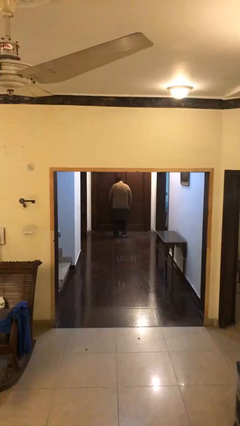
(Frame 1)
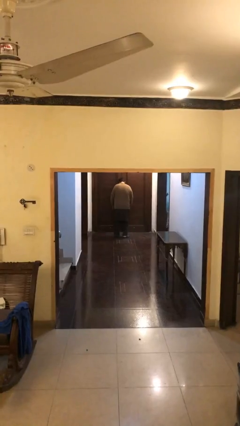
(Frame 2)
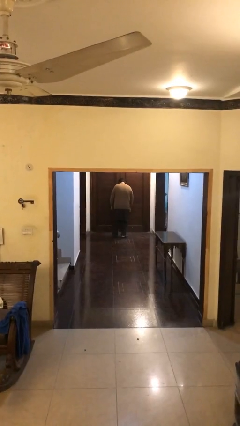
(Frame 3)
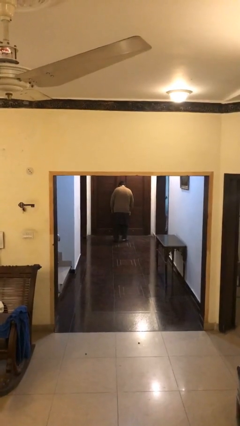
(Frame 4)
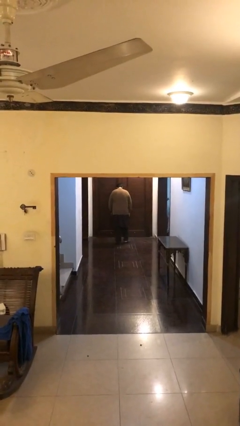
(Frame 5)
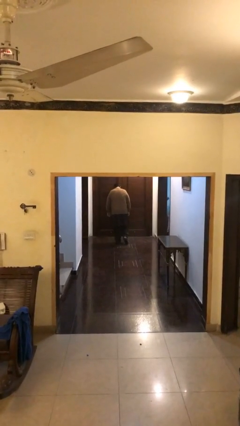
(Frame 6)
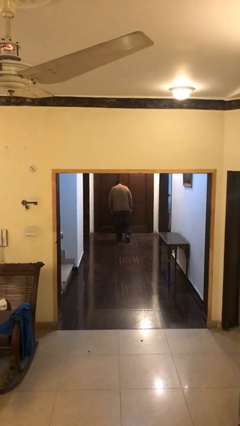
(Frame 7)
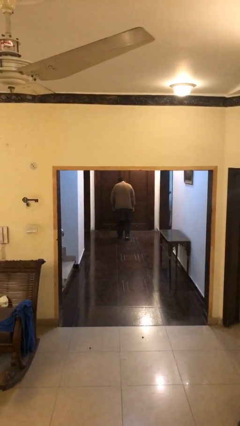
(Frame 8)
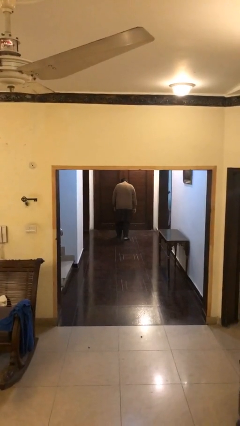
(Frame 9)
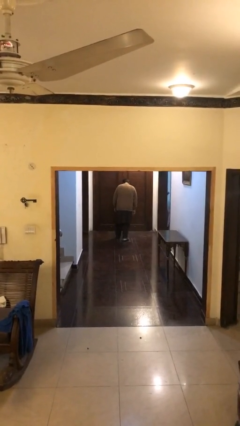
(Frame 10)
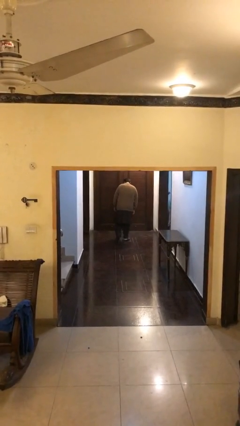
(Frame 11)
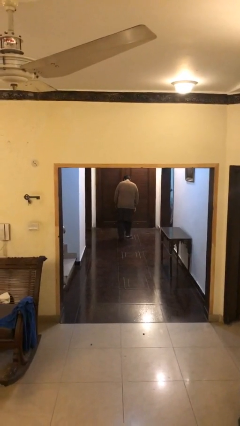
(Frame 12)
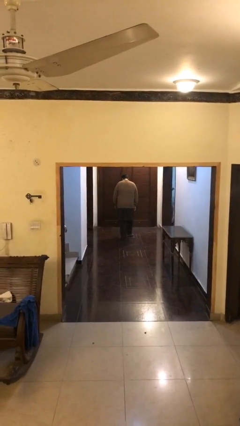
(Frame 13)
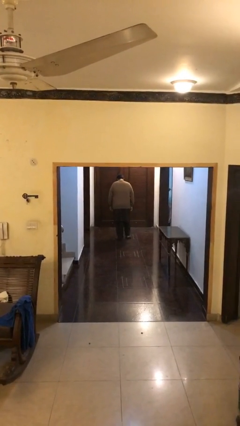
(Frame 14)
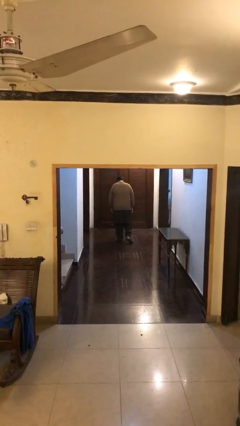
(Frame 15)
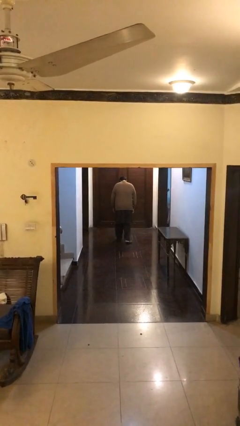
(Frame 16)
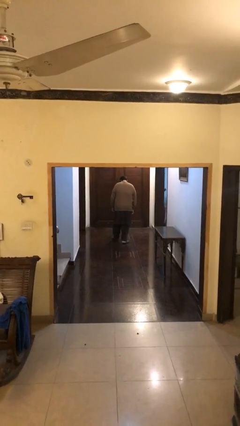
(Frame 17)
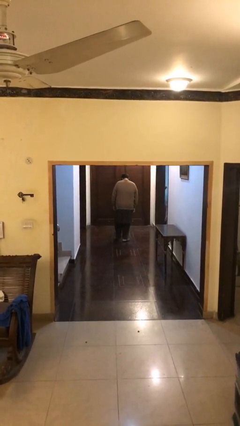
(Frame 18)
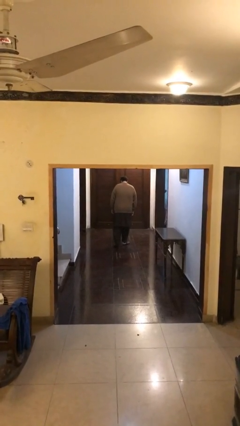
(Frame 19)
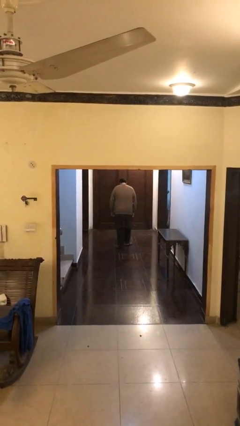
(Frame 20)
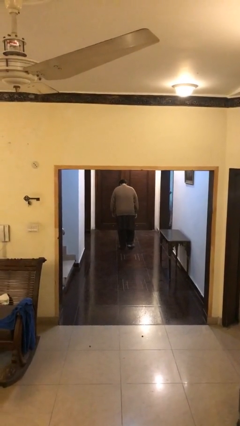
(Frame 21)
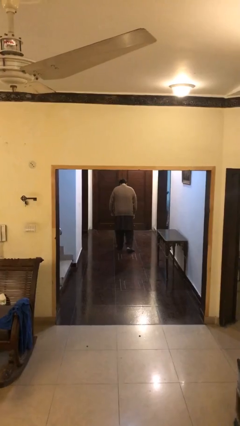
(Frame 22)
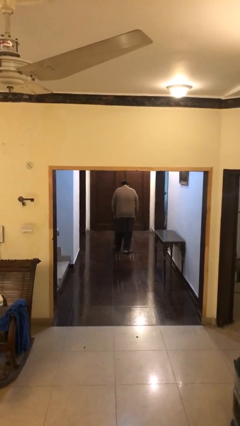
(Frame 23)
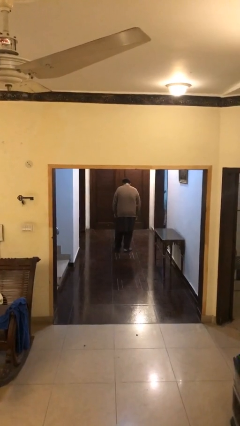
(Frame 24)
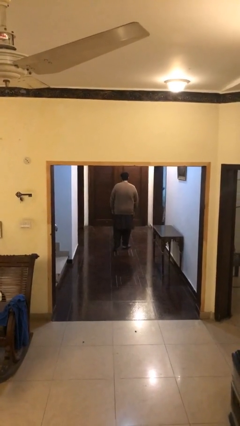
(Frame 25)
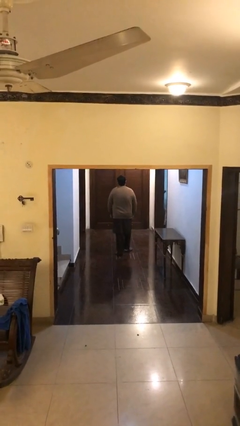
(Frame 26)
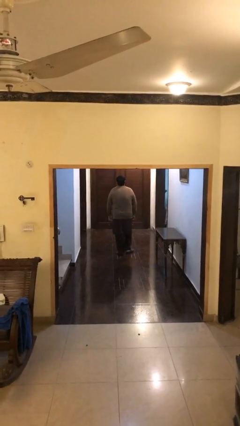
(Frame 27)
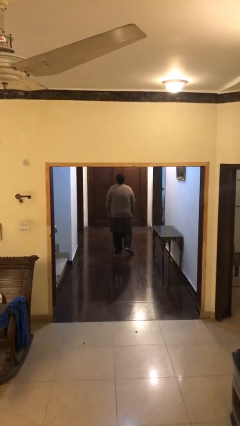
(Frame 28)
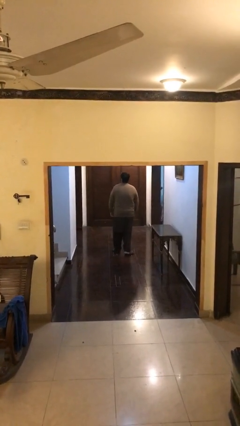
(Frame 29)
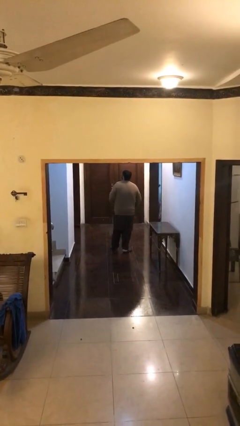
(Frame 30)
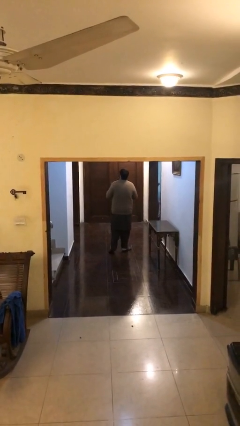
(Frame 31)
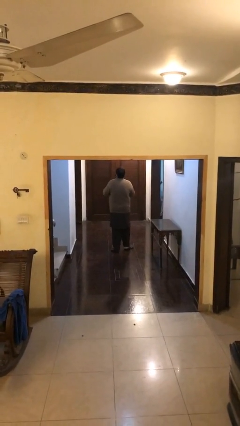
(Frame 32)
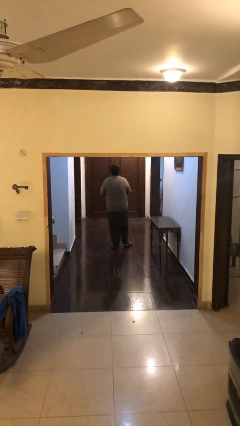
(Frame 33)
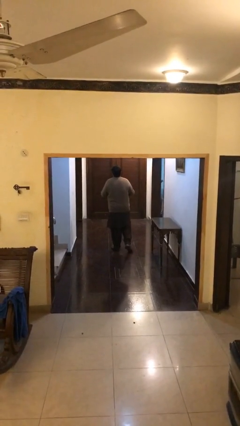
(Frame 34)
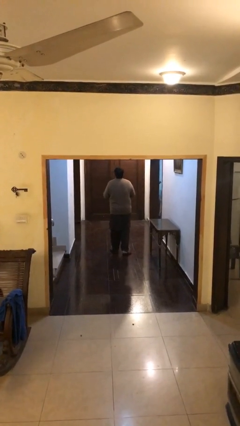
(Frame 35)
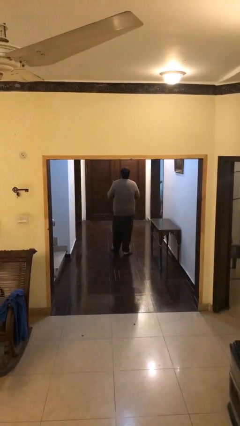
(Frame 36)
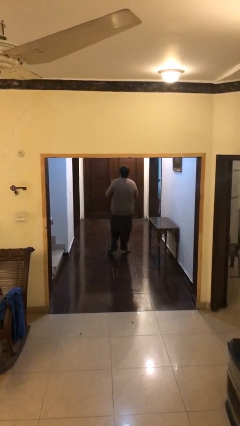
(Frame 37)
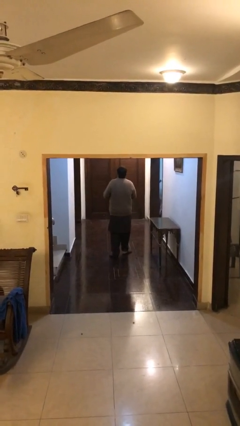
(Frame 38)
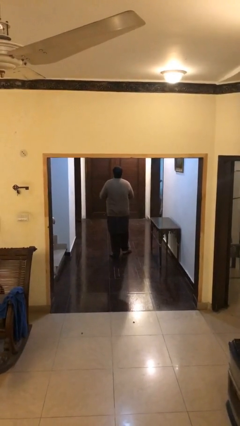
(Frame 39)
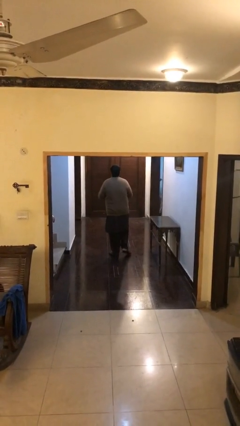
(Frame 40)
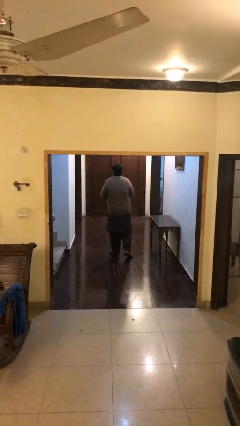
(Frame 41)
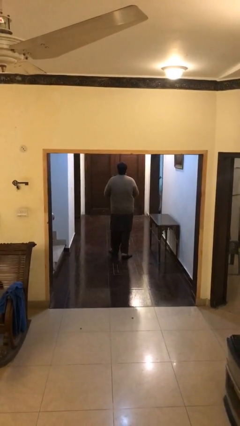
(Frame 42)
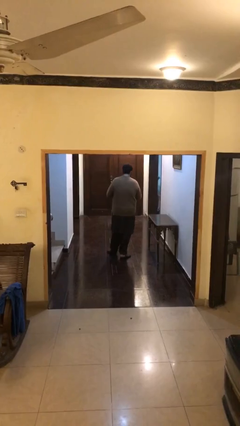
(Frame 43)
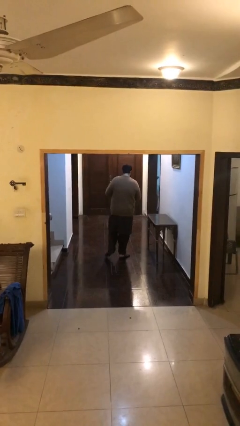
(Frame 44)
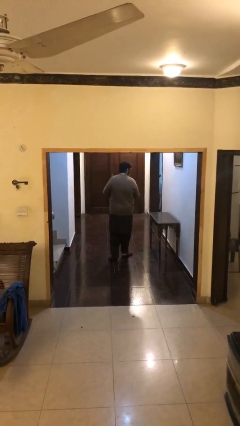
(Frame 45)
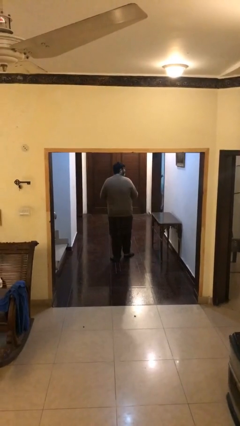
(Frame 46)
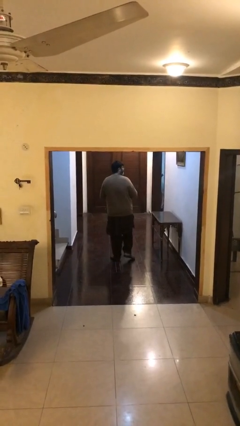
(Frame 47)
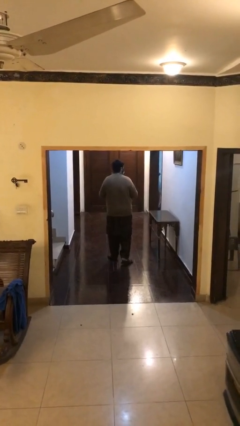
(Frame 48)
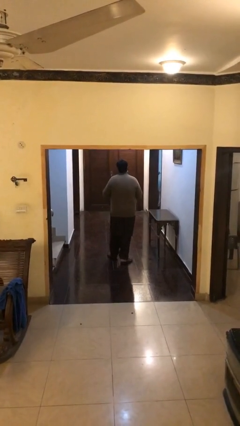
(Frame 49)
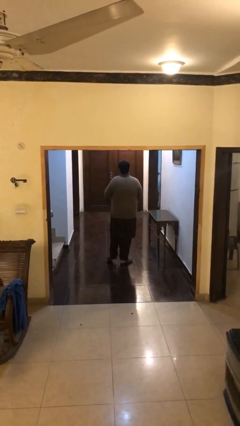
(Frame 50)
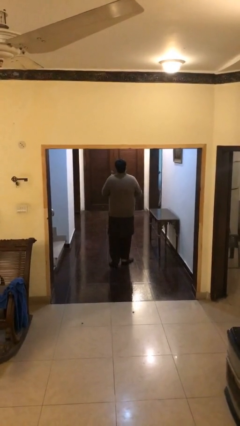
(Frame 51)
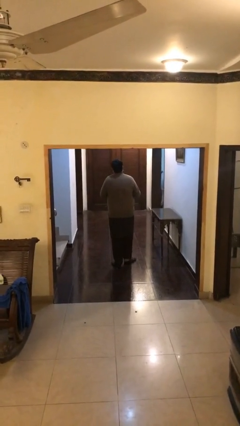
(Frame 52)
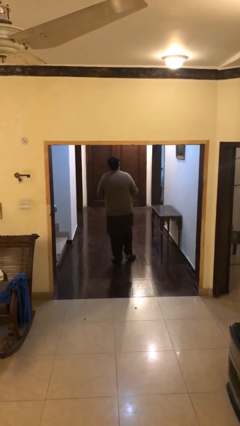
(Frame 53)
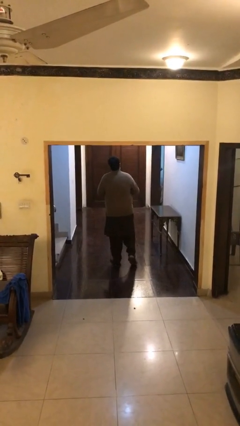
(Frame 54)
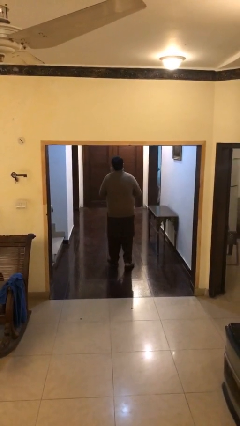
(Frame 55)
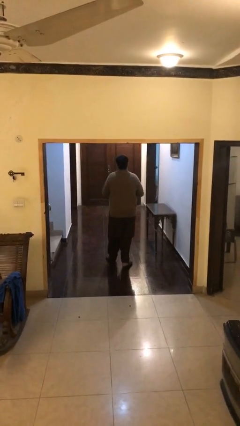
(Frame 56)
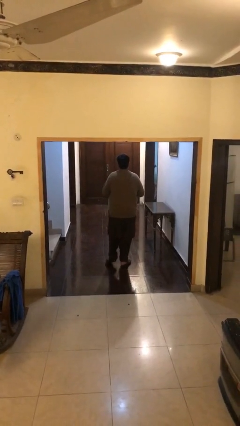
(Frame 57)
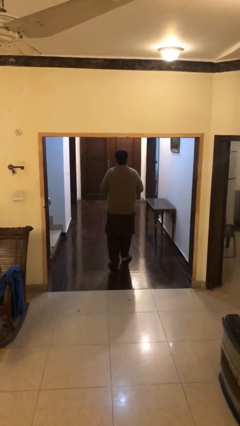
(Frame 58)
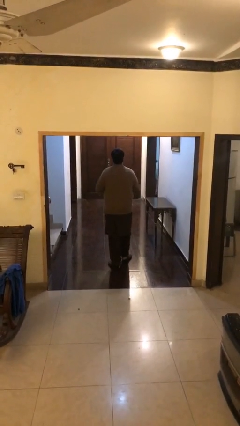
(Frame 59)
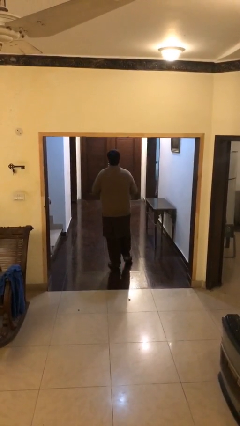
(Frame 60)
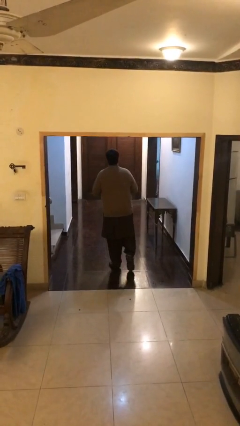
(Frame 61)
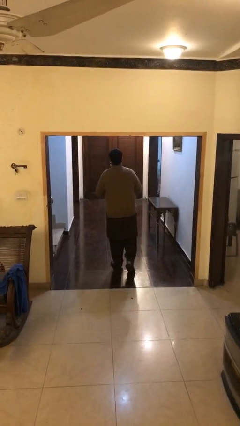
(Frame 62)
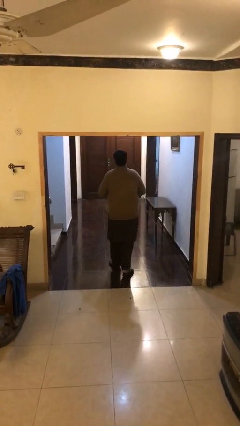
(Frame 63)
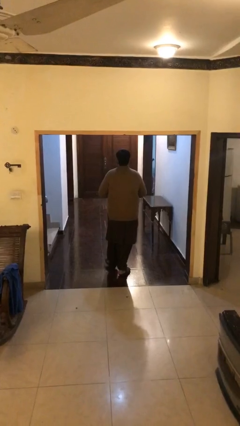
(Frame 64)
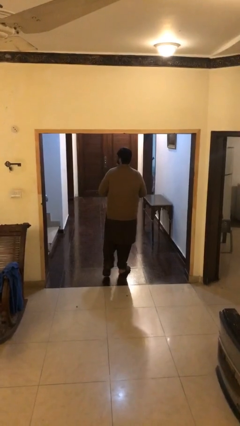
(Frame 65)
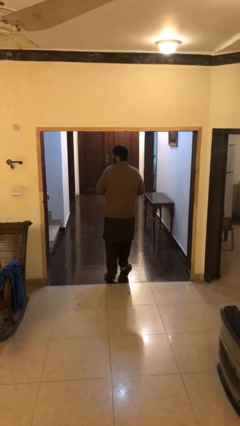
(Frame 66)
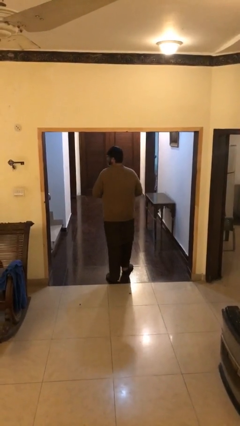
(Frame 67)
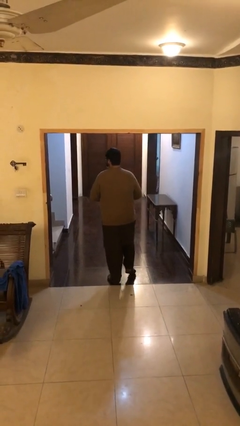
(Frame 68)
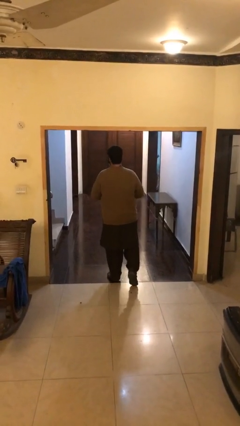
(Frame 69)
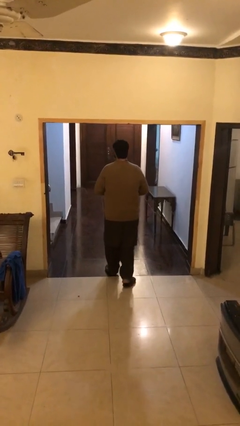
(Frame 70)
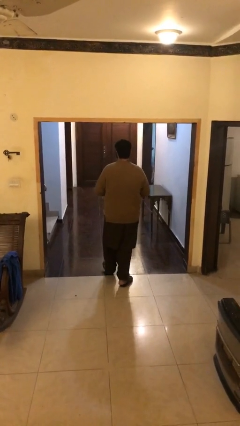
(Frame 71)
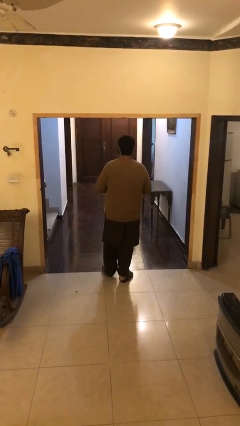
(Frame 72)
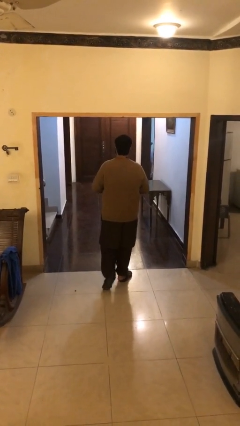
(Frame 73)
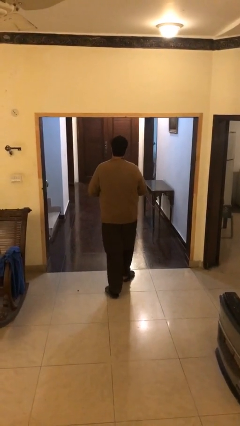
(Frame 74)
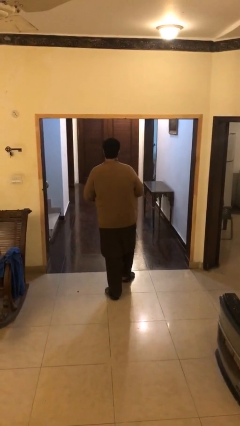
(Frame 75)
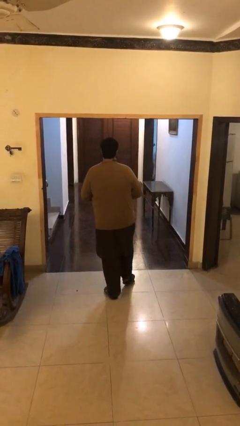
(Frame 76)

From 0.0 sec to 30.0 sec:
person walks

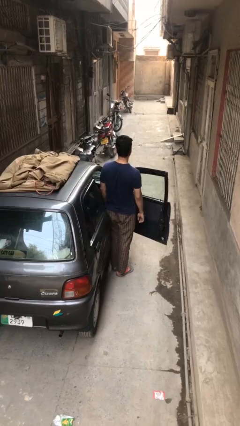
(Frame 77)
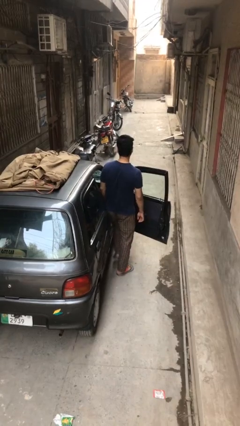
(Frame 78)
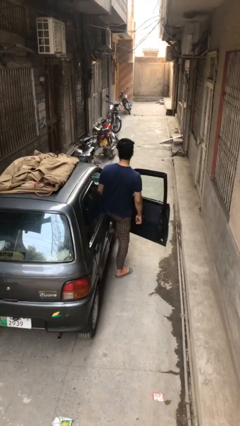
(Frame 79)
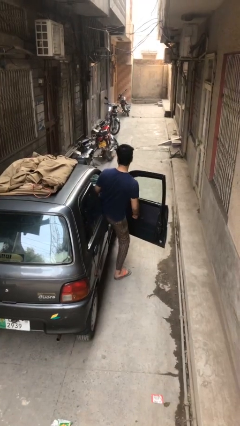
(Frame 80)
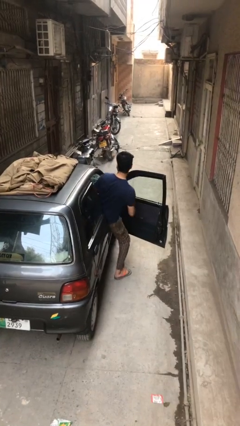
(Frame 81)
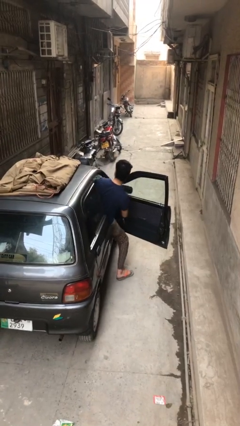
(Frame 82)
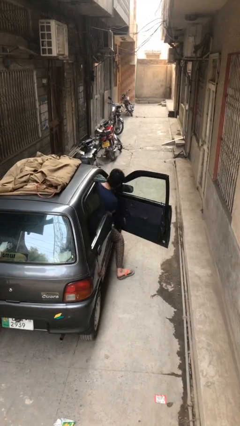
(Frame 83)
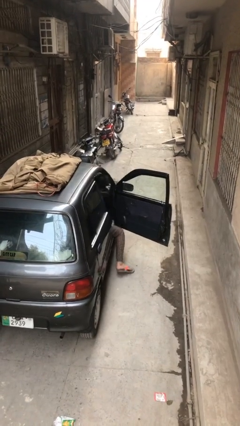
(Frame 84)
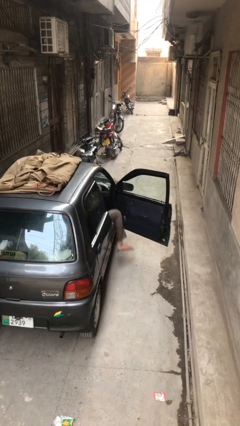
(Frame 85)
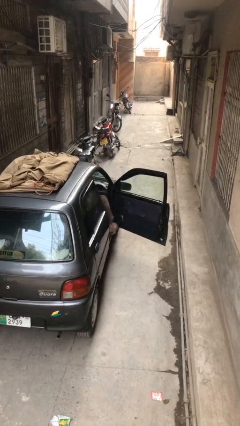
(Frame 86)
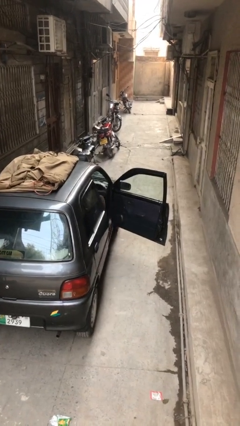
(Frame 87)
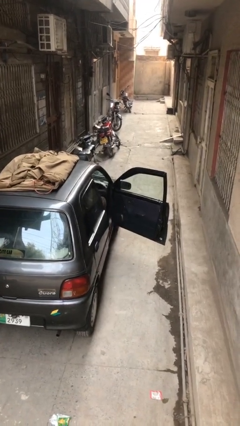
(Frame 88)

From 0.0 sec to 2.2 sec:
person enters car

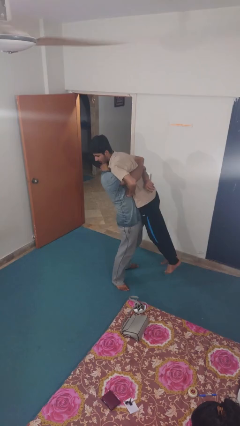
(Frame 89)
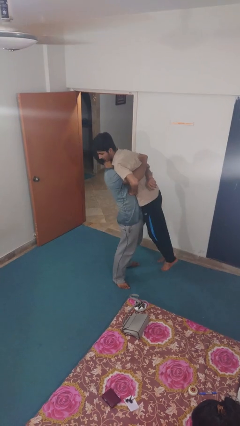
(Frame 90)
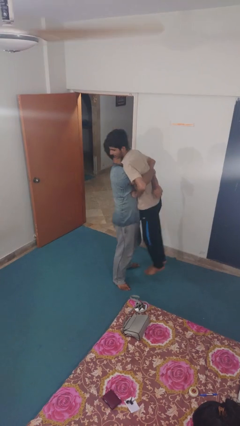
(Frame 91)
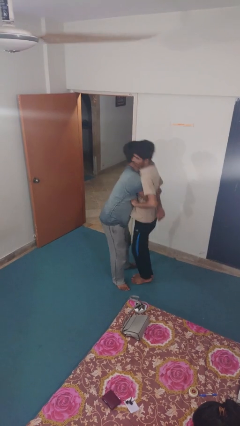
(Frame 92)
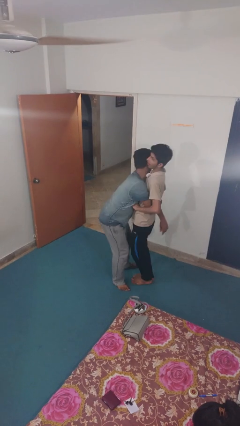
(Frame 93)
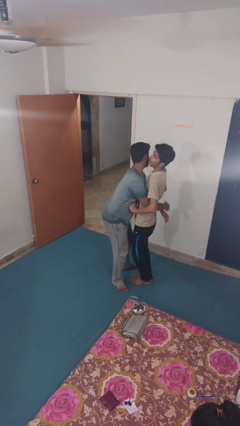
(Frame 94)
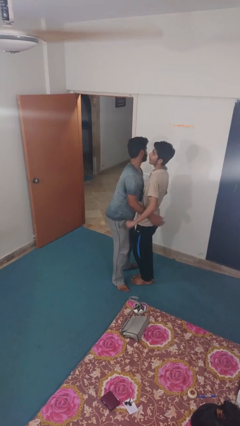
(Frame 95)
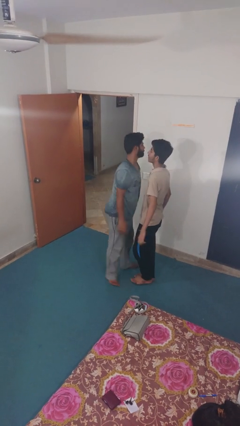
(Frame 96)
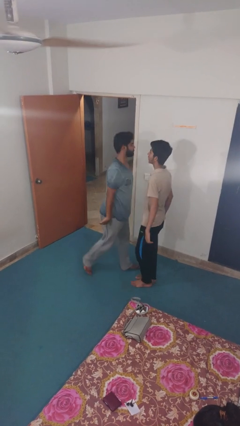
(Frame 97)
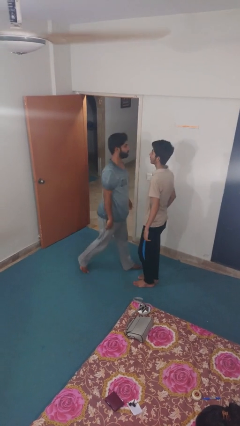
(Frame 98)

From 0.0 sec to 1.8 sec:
person puts down person
